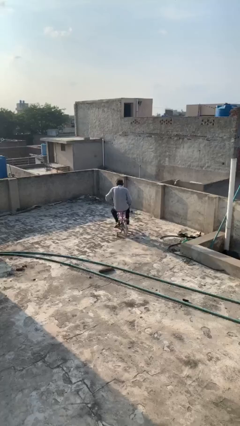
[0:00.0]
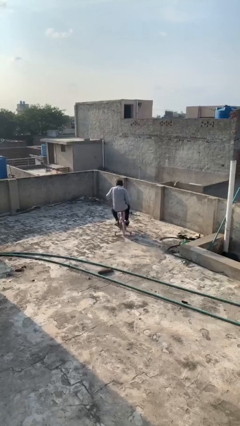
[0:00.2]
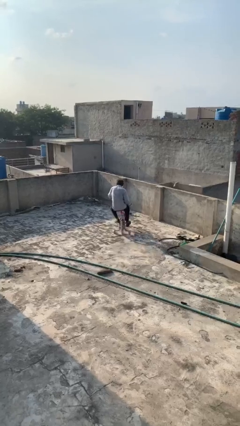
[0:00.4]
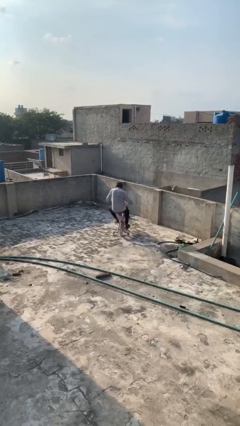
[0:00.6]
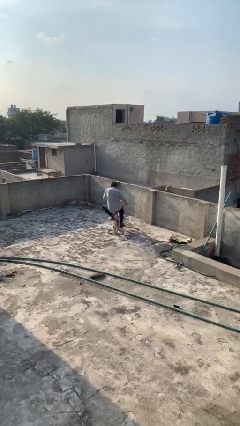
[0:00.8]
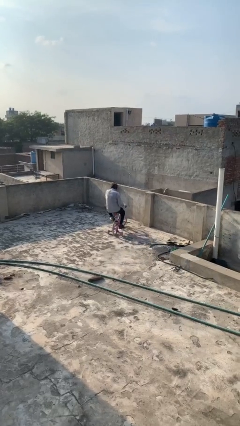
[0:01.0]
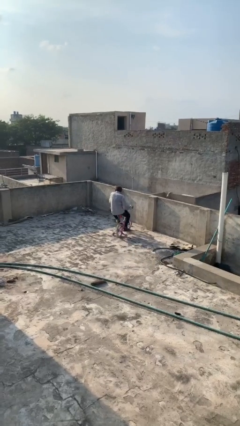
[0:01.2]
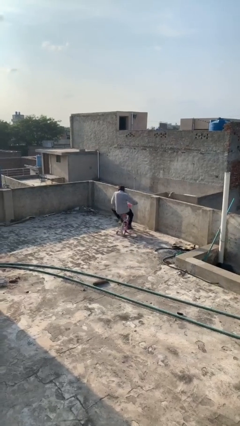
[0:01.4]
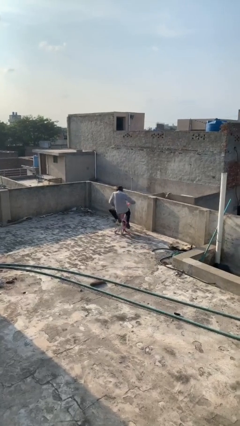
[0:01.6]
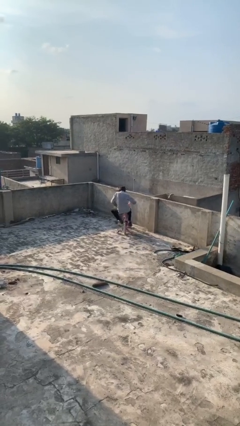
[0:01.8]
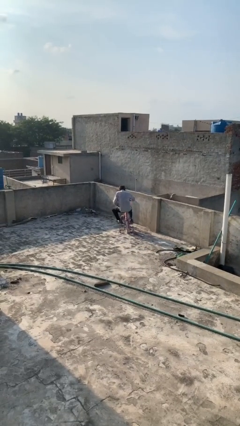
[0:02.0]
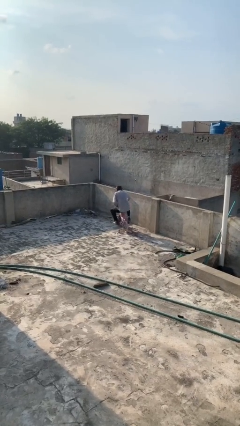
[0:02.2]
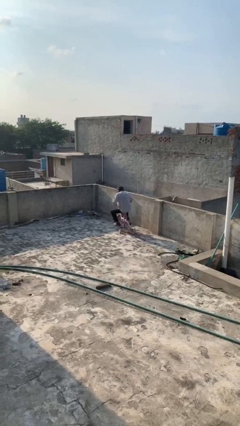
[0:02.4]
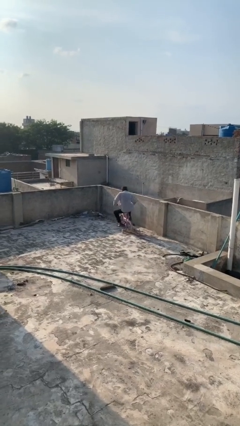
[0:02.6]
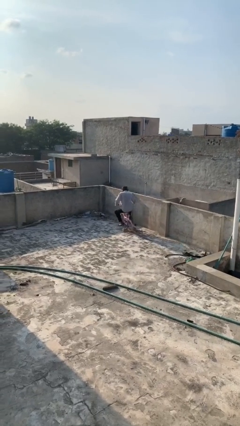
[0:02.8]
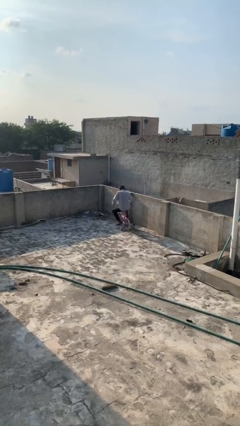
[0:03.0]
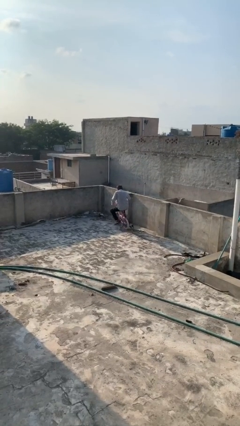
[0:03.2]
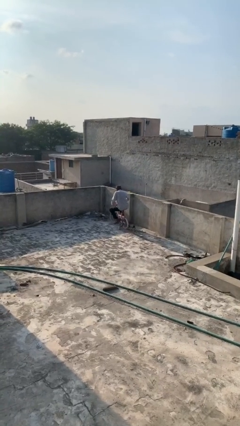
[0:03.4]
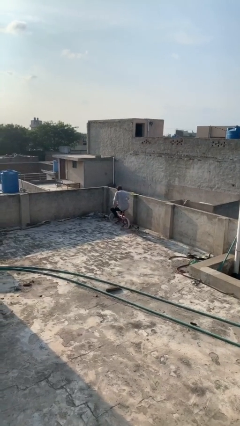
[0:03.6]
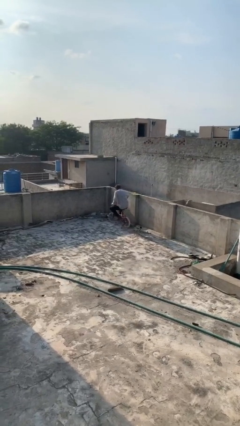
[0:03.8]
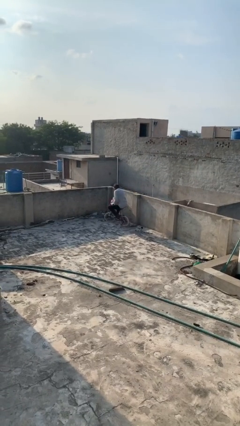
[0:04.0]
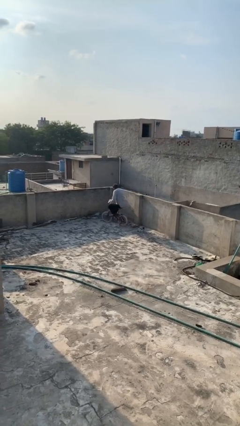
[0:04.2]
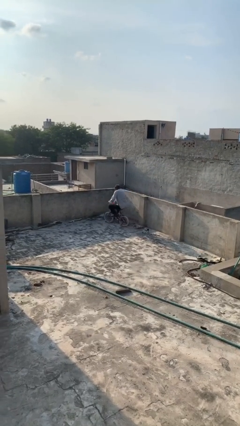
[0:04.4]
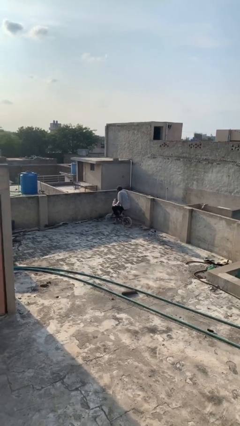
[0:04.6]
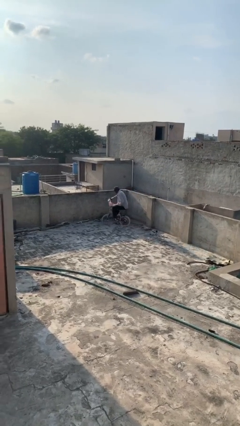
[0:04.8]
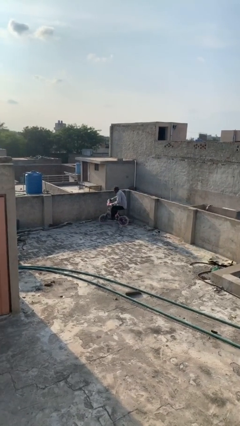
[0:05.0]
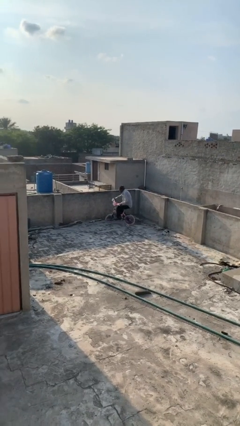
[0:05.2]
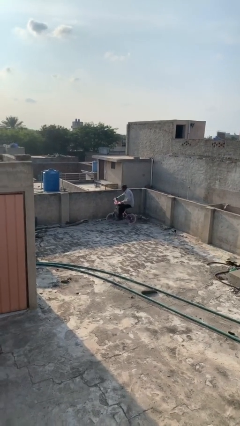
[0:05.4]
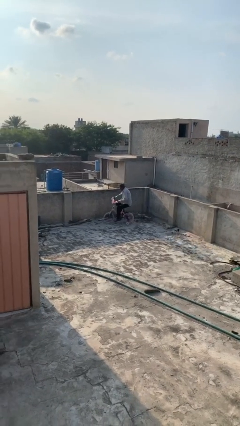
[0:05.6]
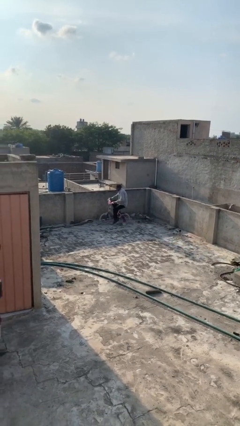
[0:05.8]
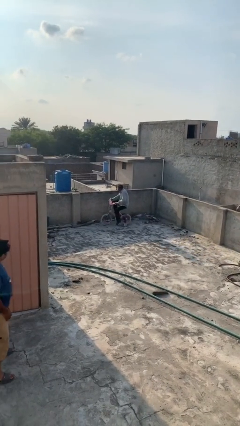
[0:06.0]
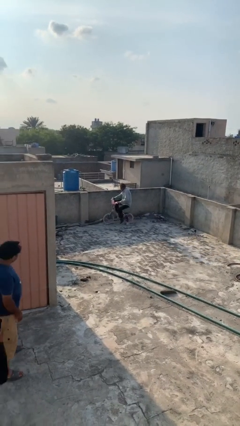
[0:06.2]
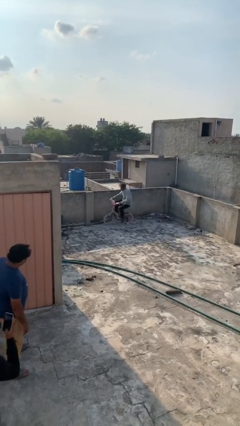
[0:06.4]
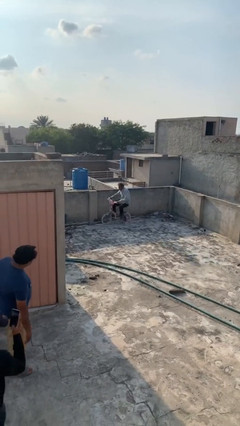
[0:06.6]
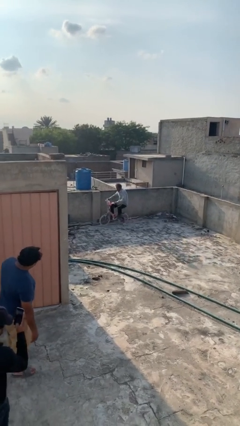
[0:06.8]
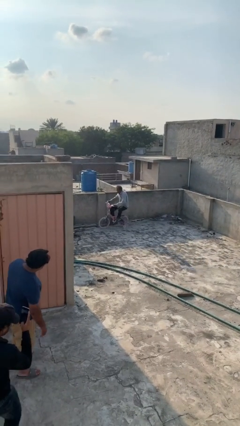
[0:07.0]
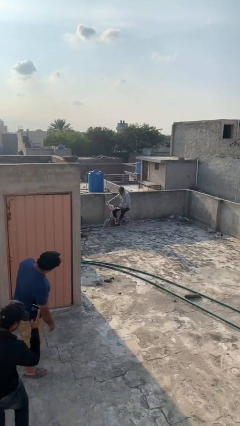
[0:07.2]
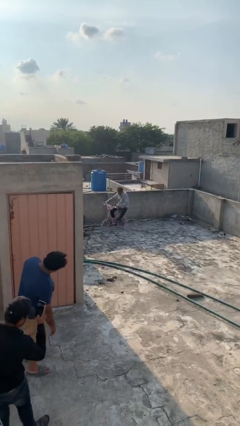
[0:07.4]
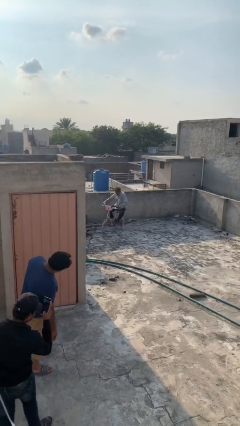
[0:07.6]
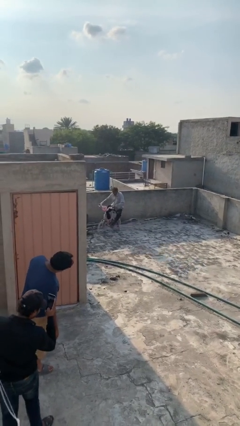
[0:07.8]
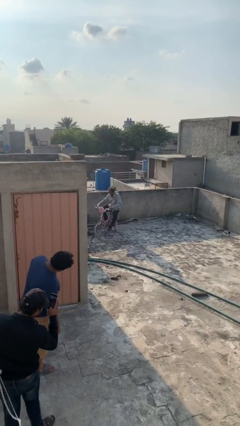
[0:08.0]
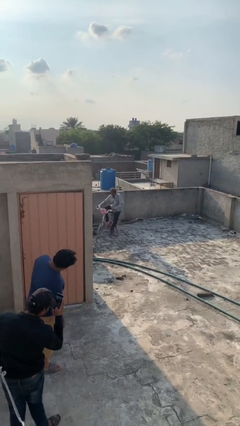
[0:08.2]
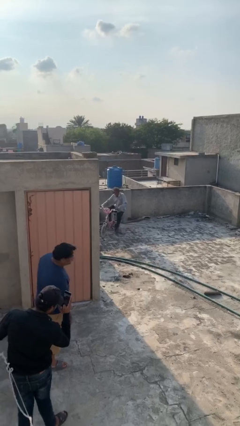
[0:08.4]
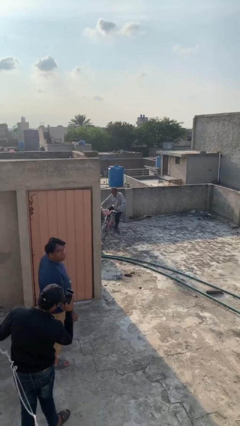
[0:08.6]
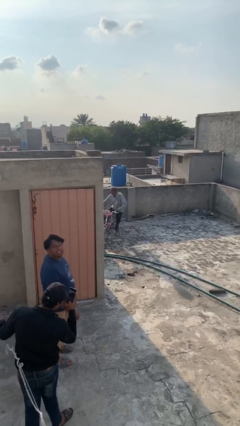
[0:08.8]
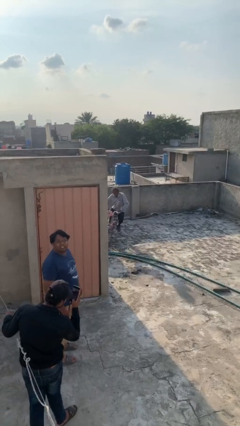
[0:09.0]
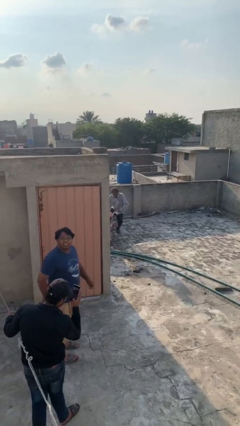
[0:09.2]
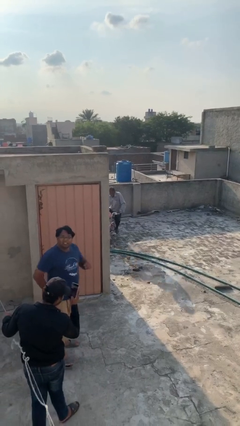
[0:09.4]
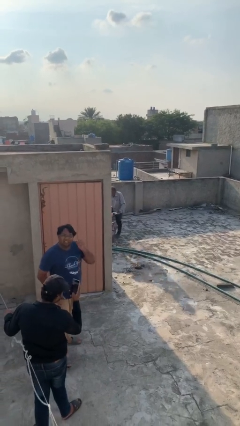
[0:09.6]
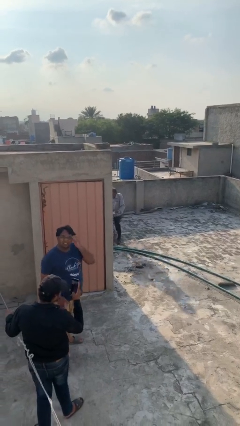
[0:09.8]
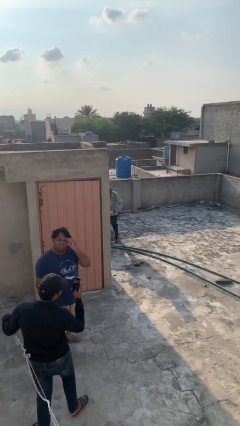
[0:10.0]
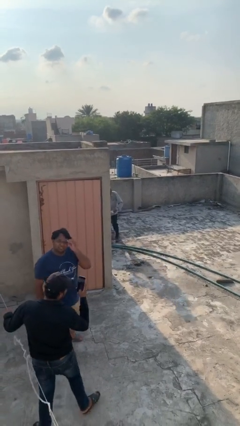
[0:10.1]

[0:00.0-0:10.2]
person rides bicycle

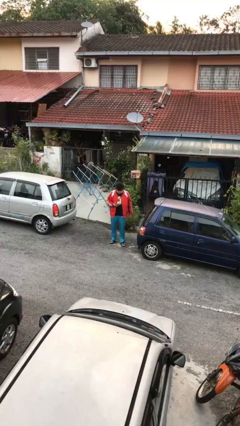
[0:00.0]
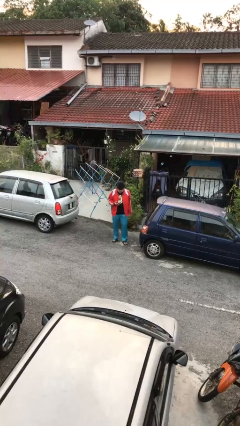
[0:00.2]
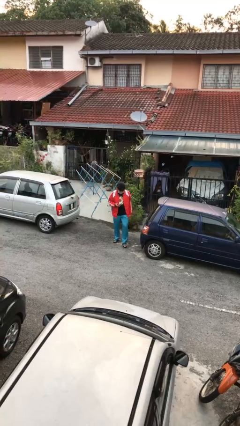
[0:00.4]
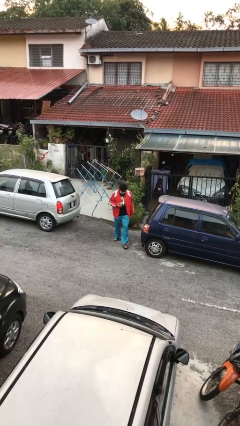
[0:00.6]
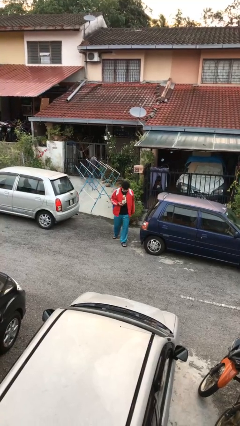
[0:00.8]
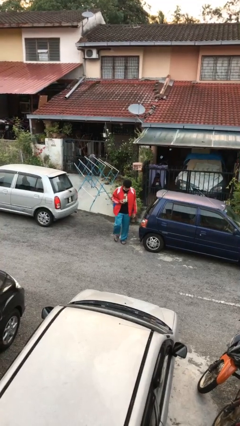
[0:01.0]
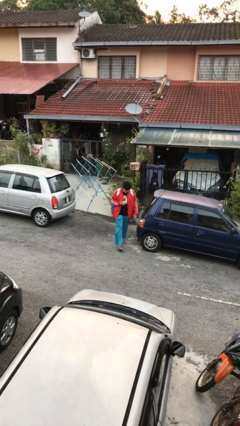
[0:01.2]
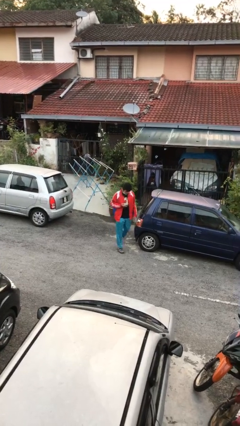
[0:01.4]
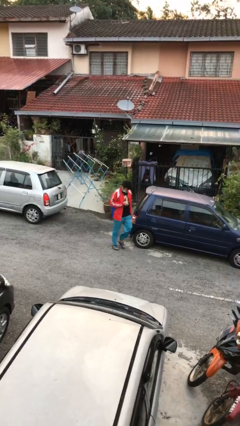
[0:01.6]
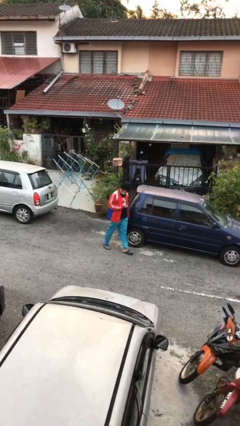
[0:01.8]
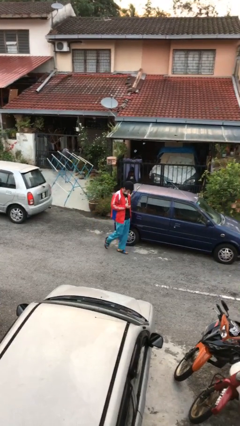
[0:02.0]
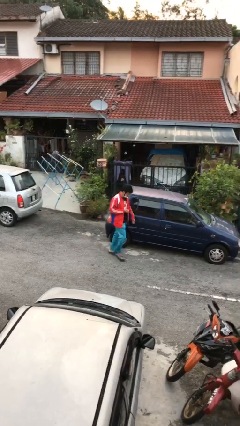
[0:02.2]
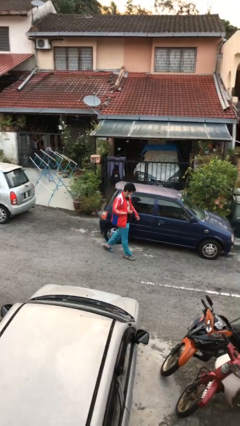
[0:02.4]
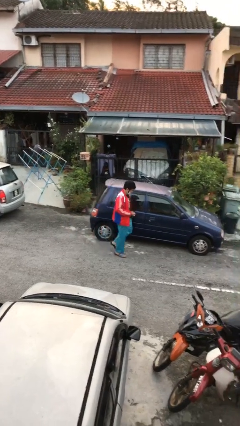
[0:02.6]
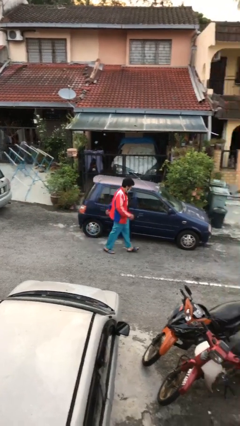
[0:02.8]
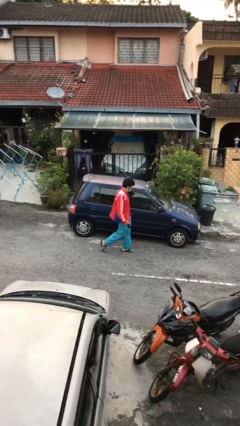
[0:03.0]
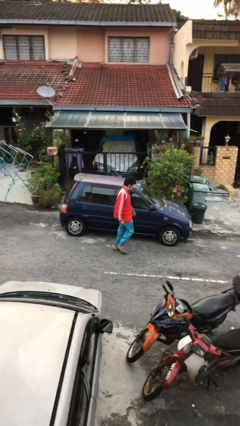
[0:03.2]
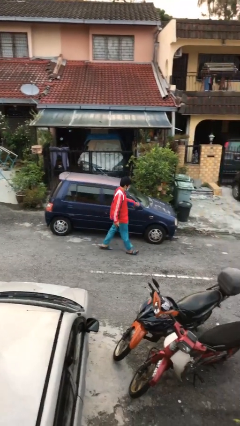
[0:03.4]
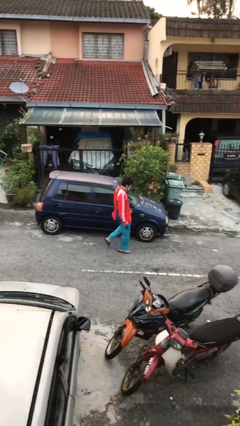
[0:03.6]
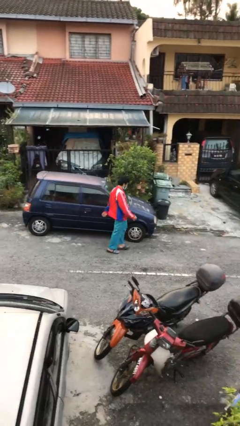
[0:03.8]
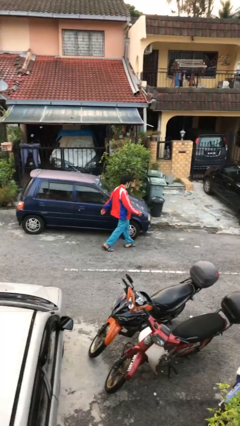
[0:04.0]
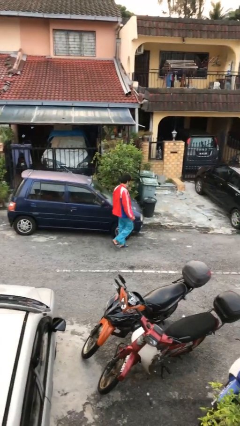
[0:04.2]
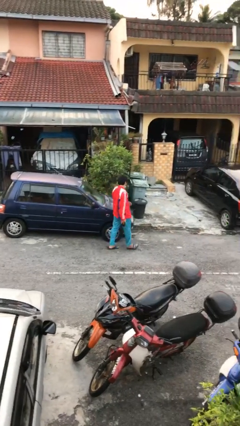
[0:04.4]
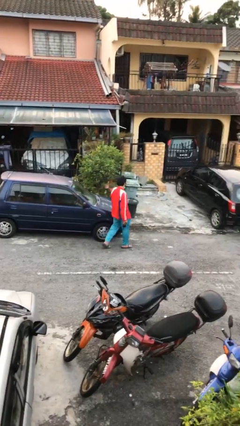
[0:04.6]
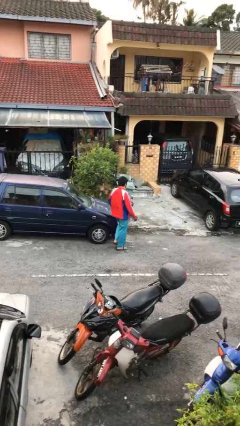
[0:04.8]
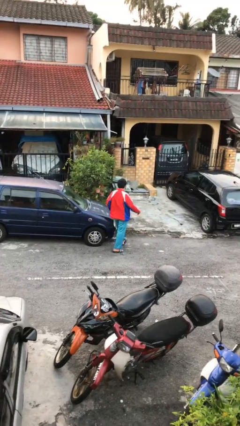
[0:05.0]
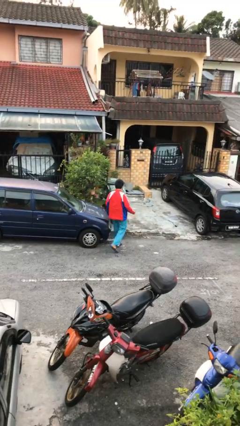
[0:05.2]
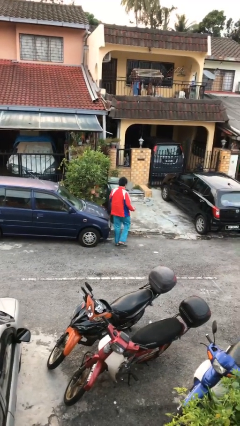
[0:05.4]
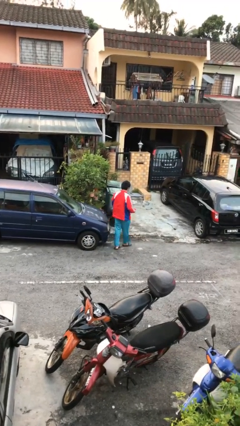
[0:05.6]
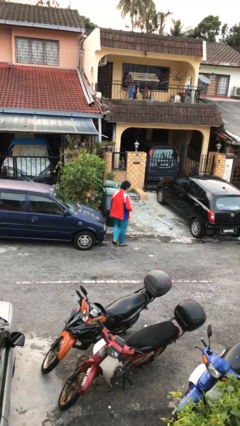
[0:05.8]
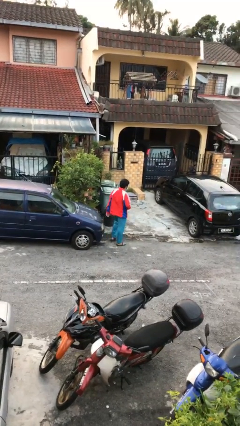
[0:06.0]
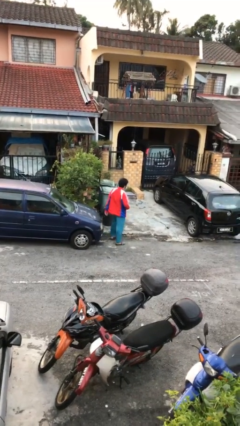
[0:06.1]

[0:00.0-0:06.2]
person walks around car

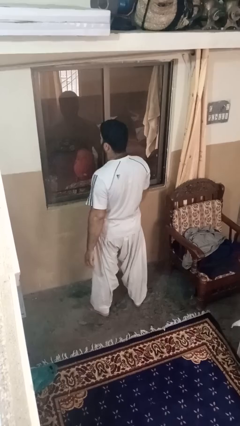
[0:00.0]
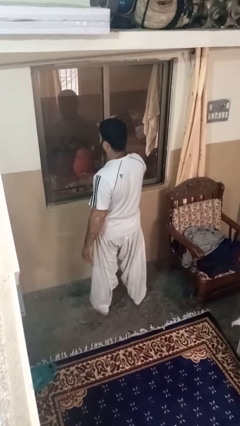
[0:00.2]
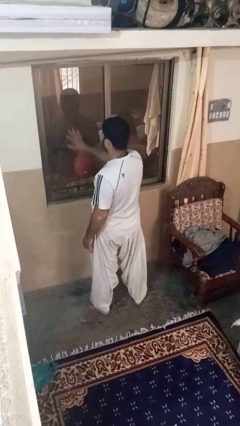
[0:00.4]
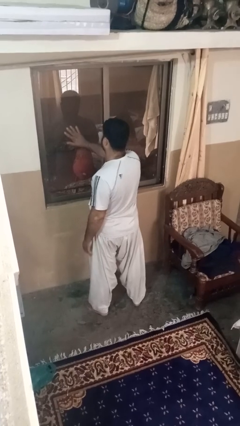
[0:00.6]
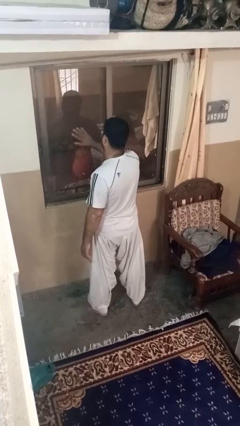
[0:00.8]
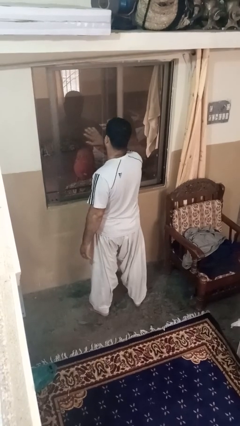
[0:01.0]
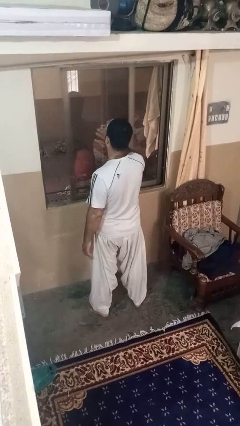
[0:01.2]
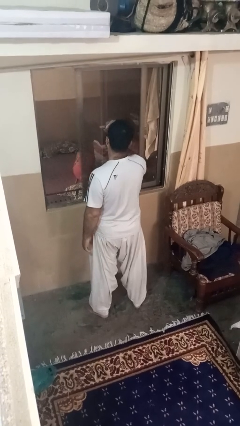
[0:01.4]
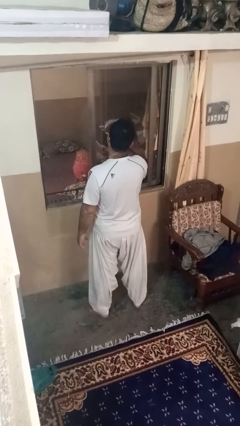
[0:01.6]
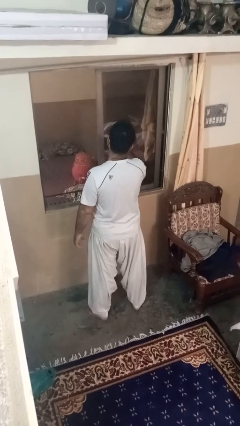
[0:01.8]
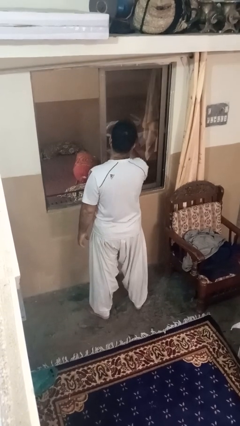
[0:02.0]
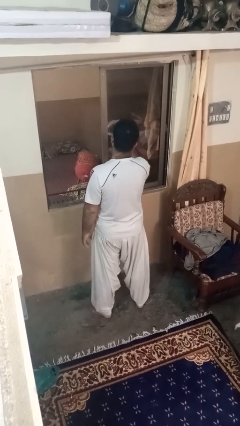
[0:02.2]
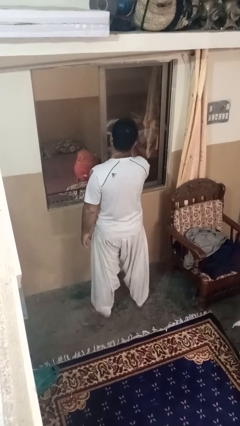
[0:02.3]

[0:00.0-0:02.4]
person opens home window
